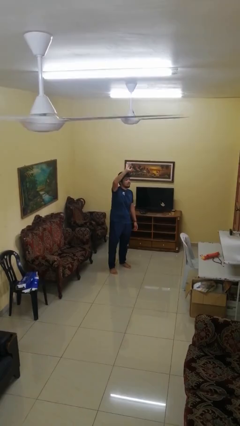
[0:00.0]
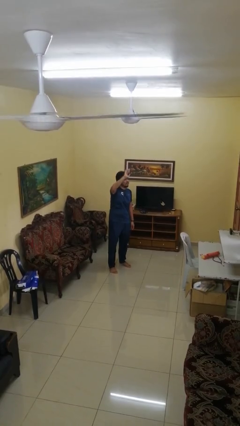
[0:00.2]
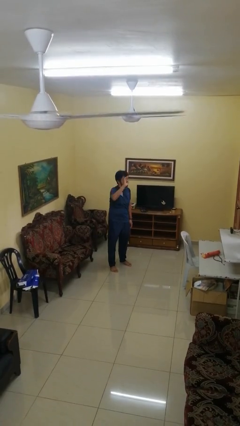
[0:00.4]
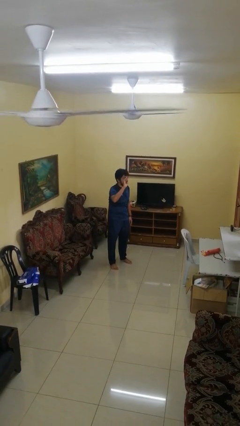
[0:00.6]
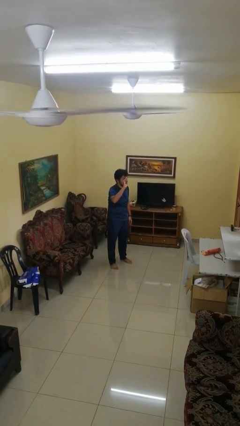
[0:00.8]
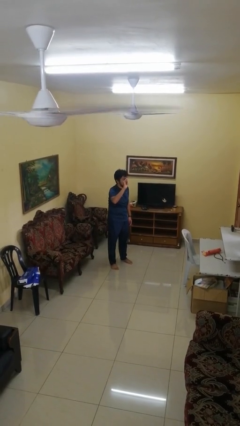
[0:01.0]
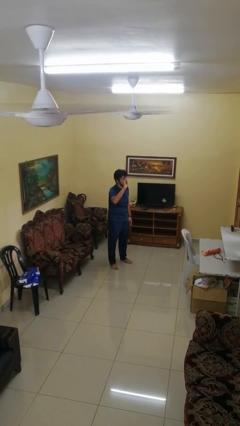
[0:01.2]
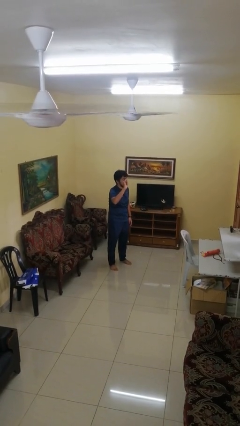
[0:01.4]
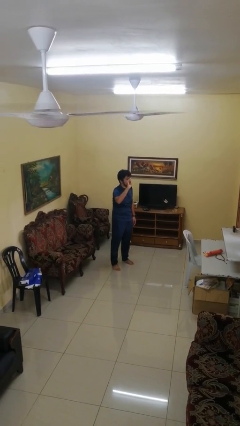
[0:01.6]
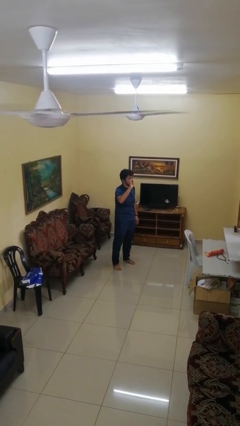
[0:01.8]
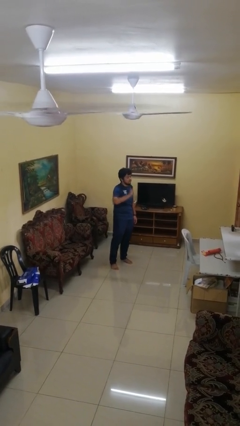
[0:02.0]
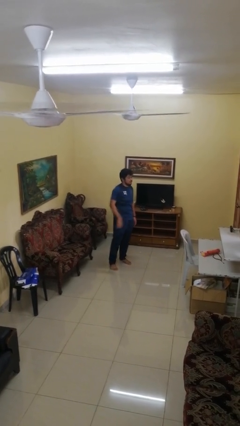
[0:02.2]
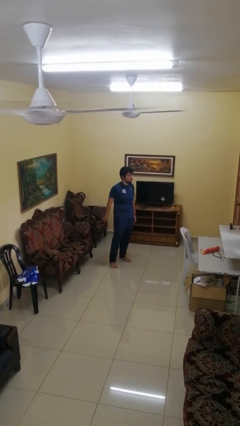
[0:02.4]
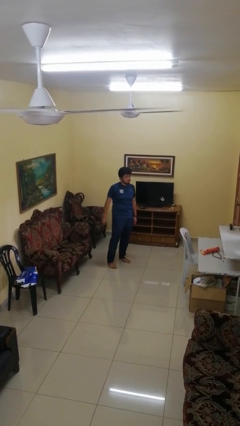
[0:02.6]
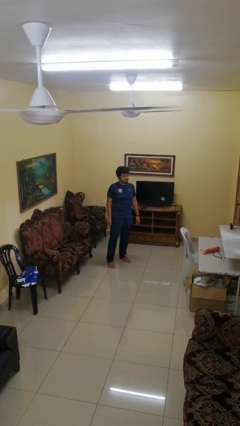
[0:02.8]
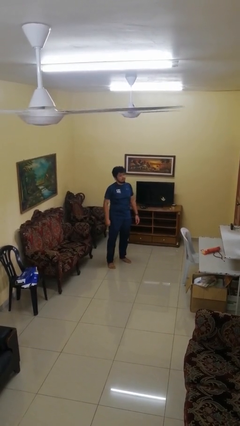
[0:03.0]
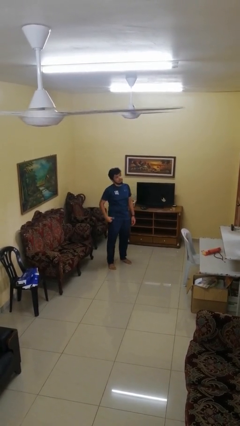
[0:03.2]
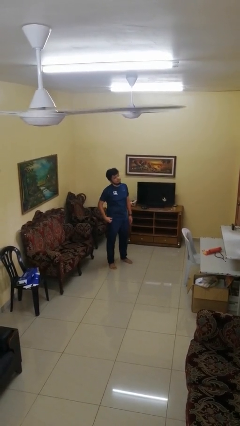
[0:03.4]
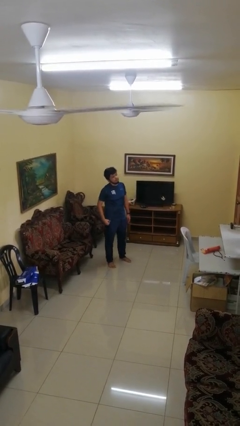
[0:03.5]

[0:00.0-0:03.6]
person gestures lower hand

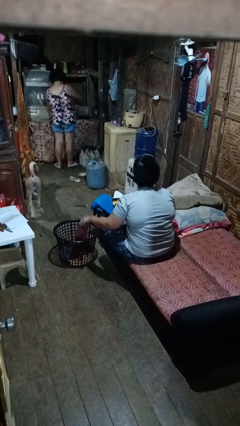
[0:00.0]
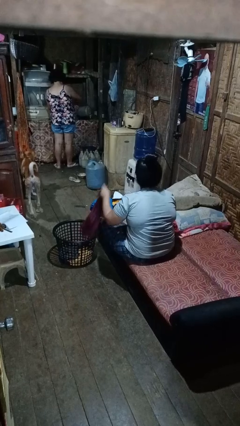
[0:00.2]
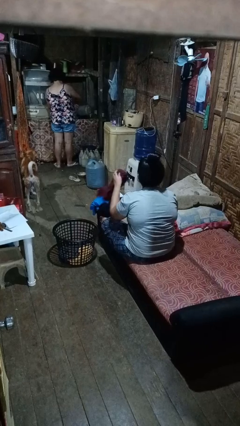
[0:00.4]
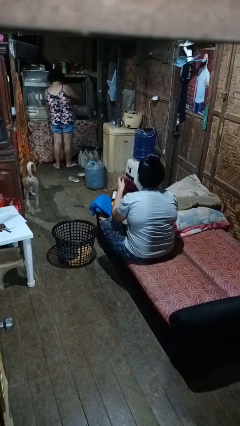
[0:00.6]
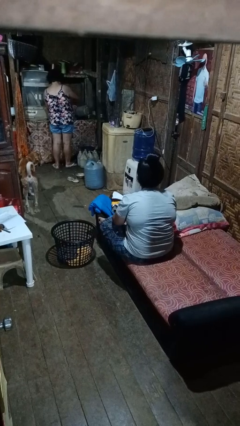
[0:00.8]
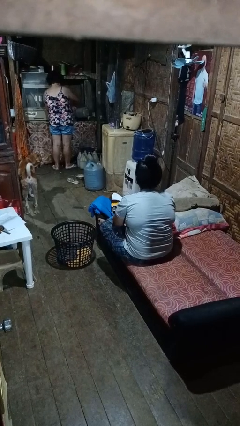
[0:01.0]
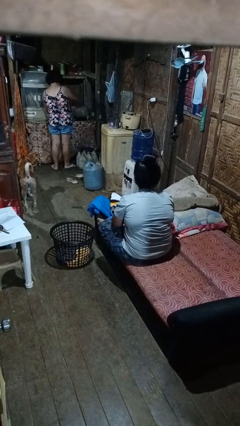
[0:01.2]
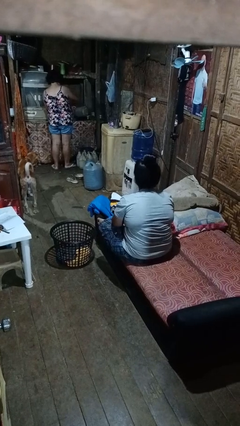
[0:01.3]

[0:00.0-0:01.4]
person takes object from basket

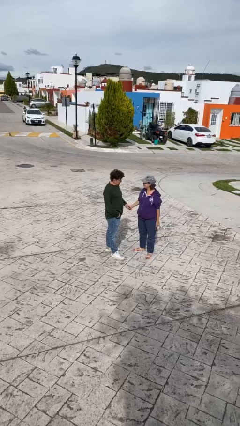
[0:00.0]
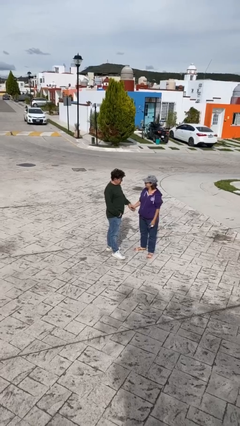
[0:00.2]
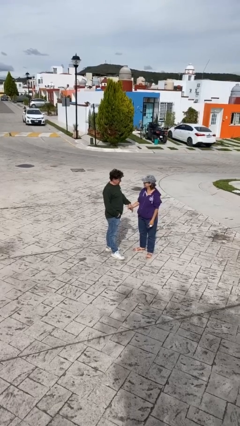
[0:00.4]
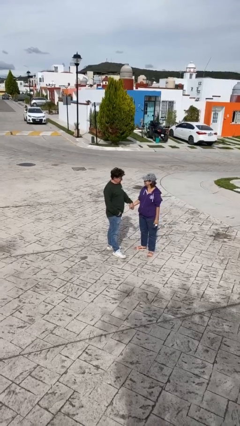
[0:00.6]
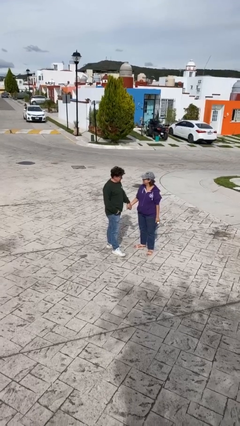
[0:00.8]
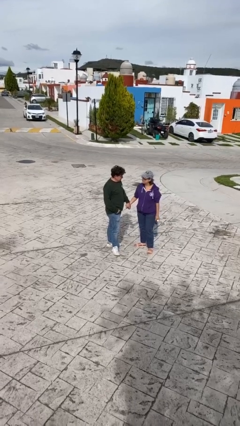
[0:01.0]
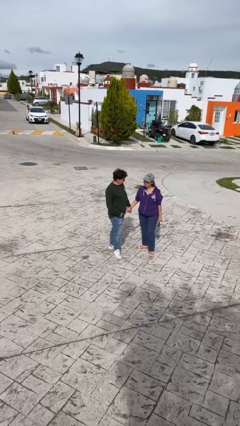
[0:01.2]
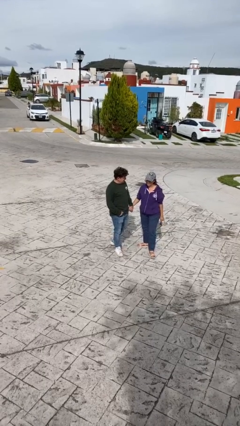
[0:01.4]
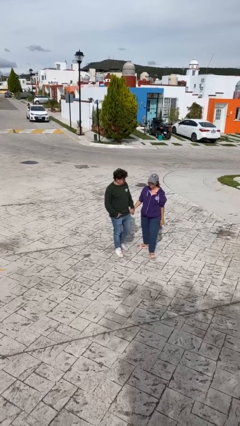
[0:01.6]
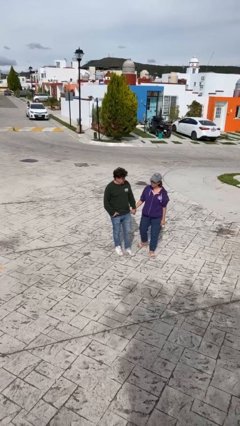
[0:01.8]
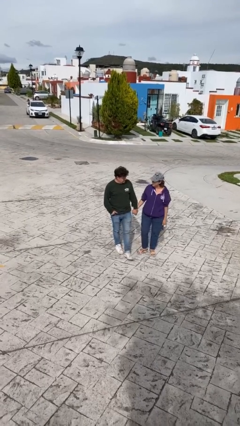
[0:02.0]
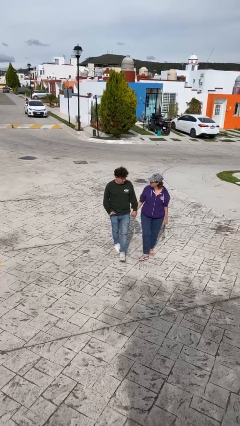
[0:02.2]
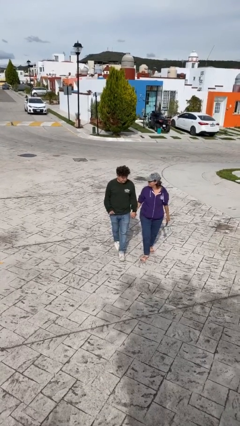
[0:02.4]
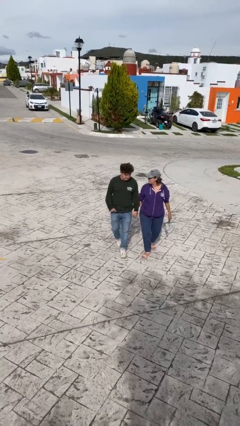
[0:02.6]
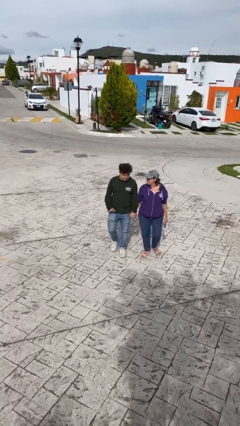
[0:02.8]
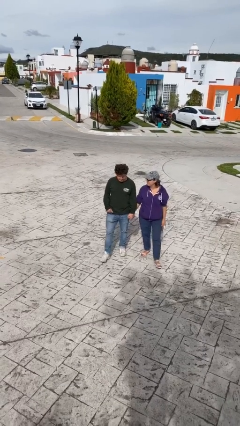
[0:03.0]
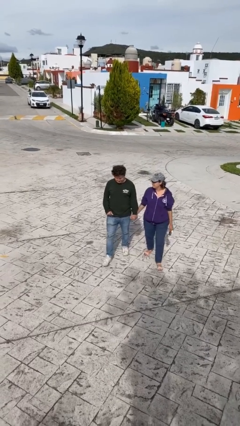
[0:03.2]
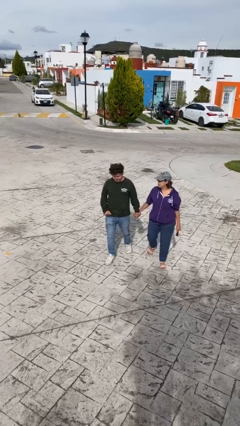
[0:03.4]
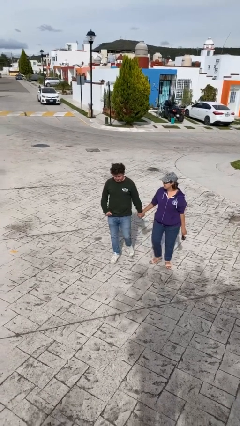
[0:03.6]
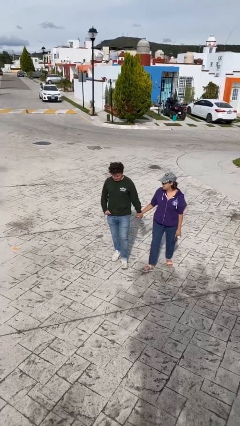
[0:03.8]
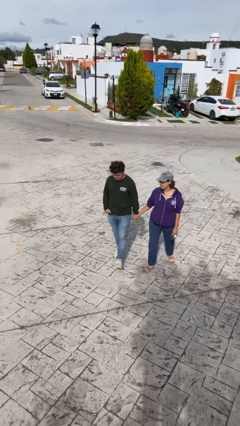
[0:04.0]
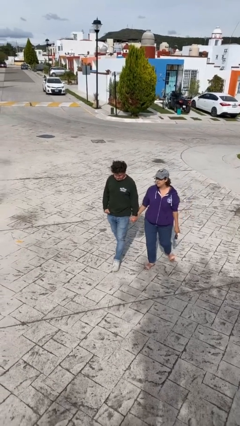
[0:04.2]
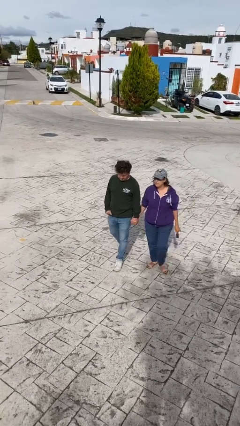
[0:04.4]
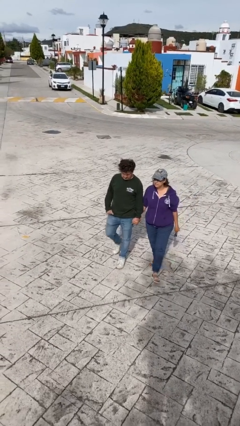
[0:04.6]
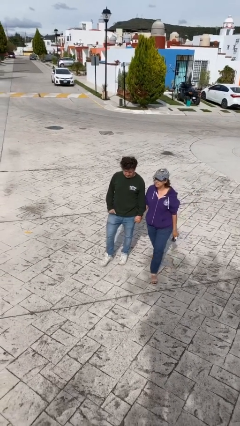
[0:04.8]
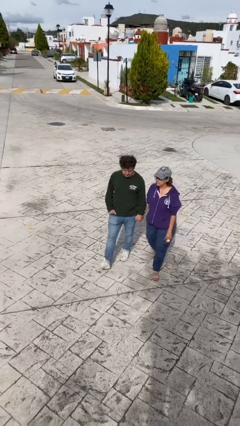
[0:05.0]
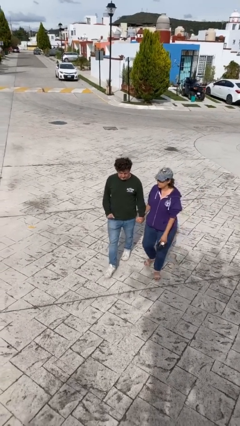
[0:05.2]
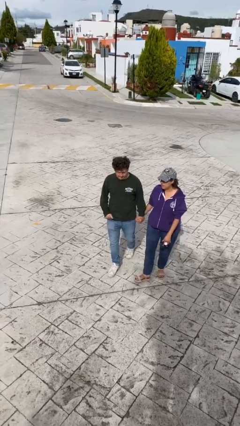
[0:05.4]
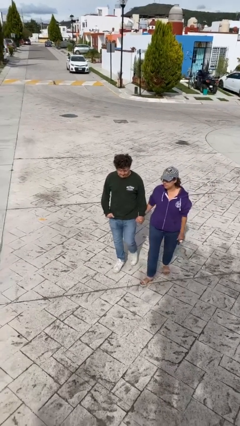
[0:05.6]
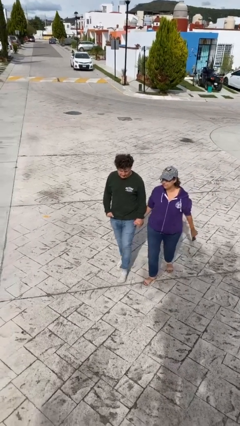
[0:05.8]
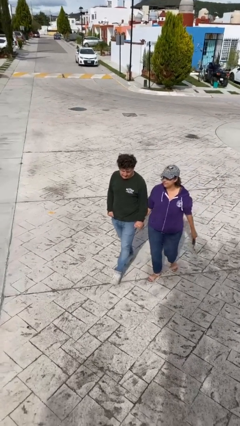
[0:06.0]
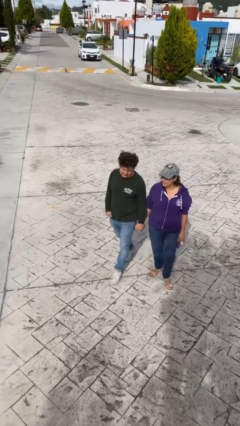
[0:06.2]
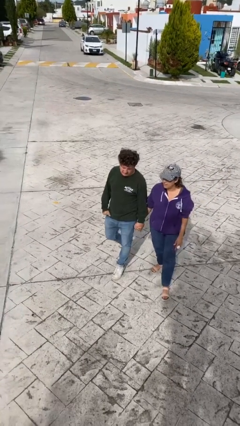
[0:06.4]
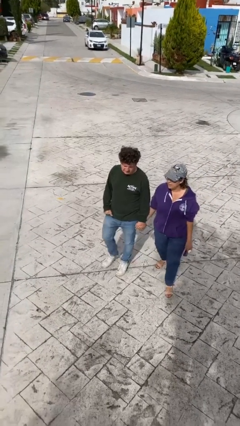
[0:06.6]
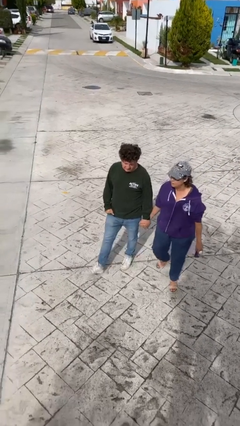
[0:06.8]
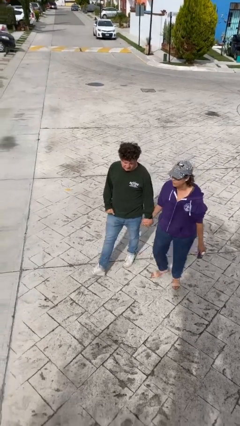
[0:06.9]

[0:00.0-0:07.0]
person holds hand

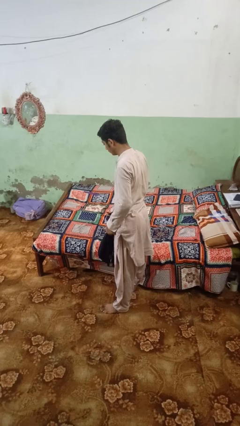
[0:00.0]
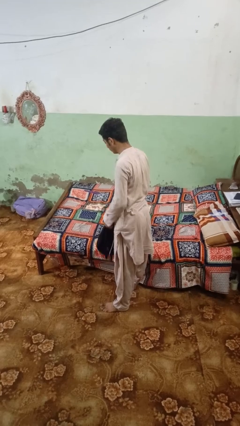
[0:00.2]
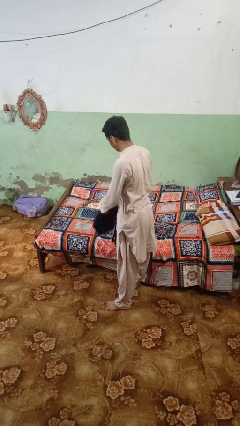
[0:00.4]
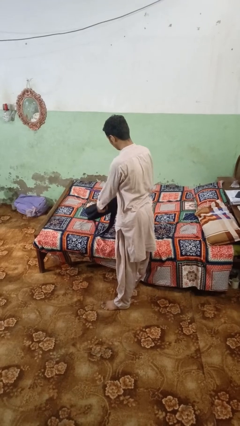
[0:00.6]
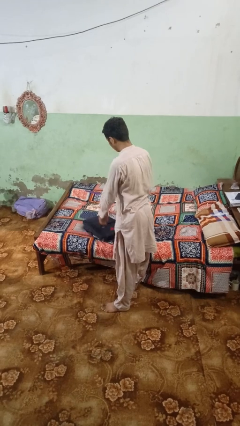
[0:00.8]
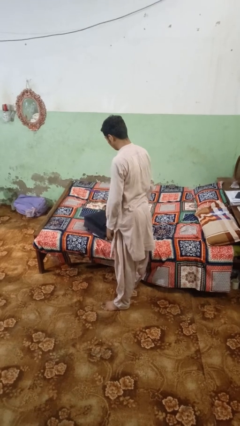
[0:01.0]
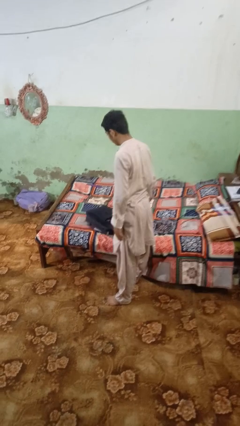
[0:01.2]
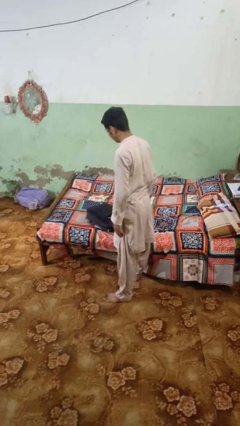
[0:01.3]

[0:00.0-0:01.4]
person puts down object on bed

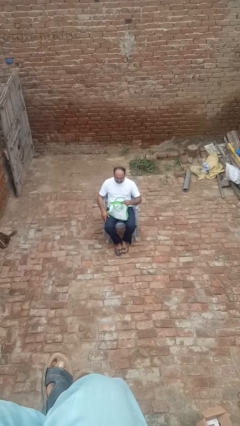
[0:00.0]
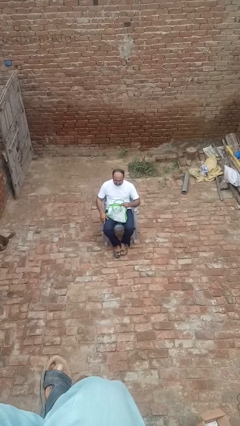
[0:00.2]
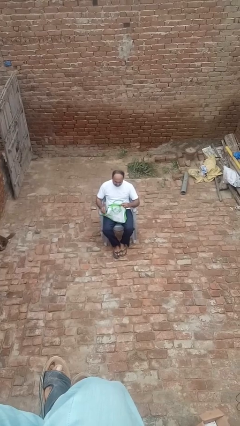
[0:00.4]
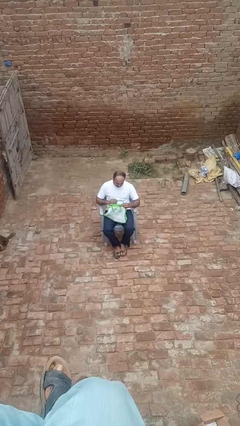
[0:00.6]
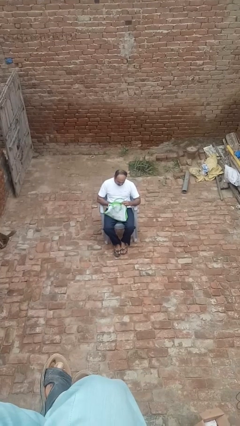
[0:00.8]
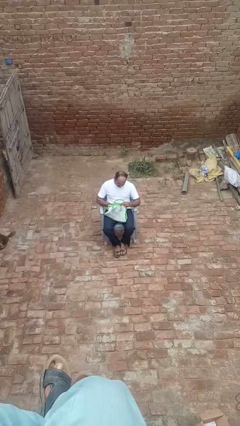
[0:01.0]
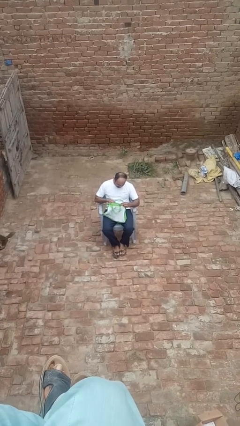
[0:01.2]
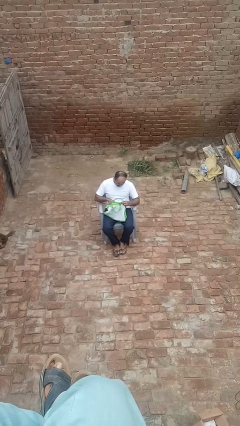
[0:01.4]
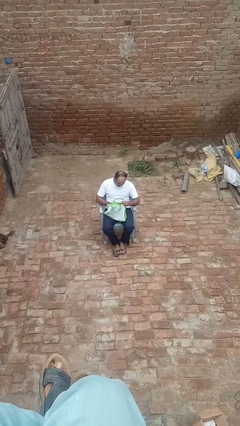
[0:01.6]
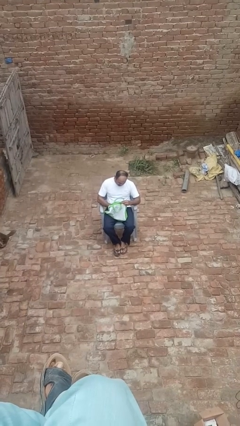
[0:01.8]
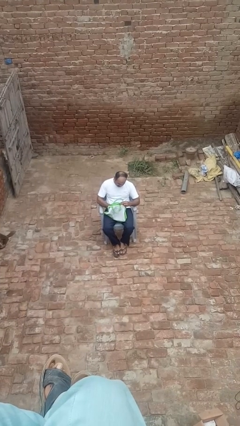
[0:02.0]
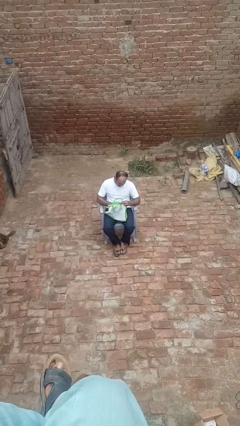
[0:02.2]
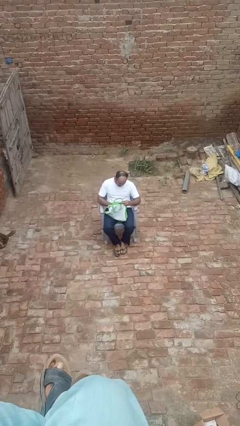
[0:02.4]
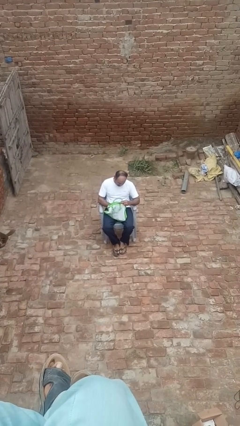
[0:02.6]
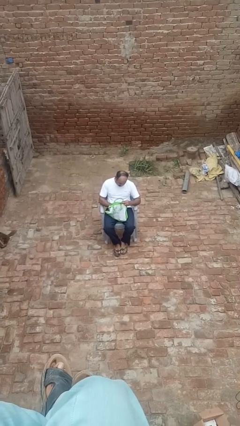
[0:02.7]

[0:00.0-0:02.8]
person searches in bag

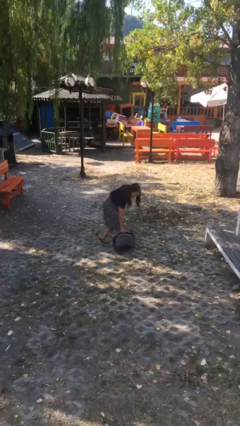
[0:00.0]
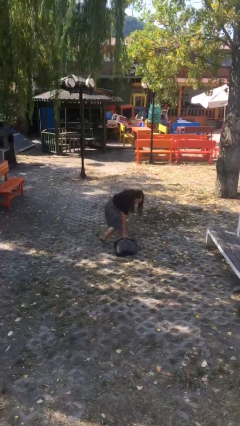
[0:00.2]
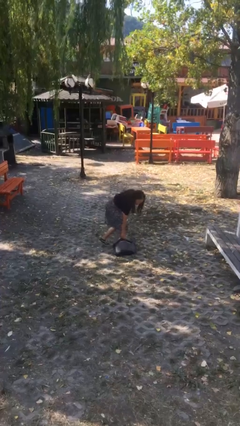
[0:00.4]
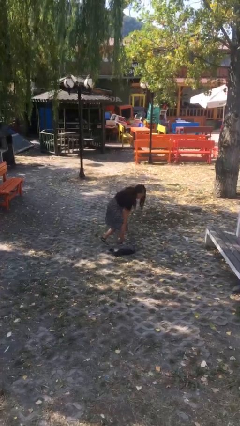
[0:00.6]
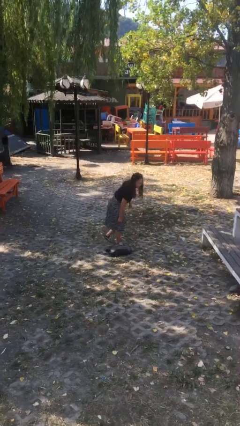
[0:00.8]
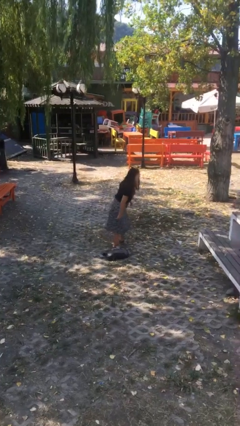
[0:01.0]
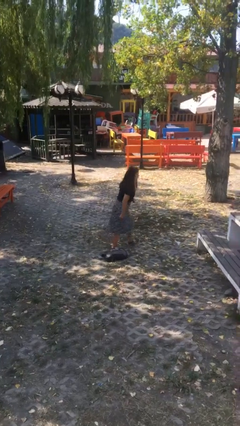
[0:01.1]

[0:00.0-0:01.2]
person puts down object on floor

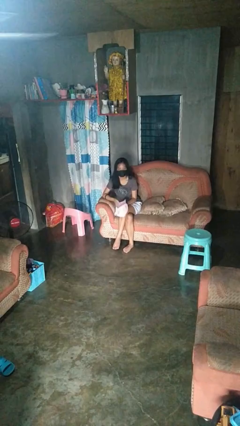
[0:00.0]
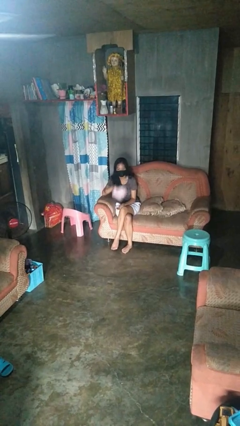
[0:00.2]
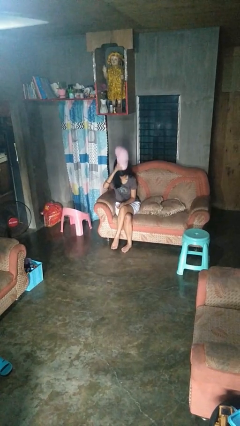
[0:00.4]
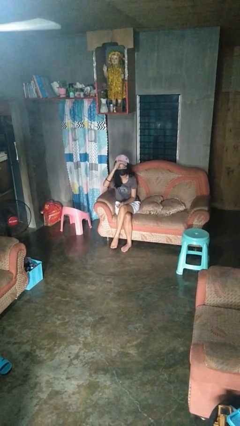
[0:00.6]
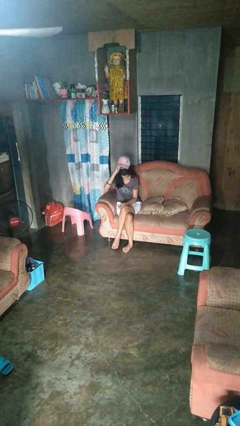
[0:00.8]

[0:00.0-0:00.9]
person puts on hat
